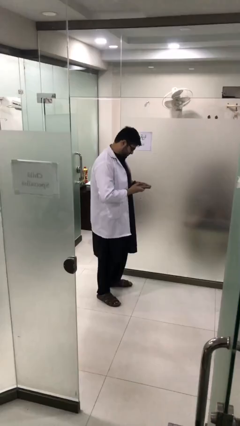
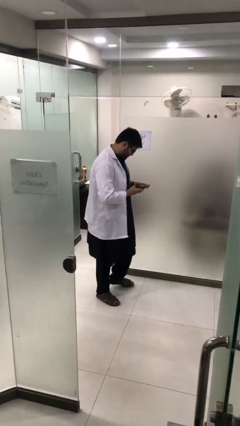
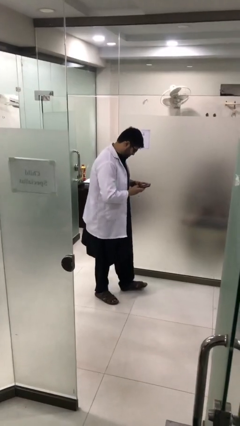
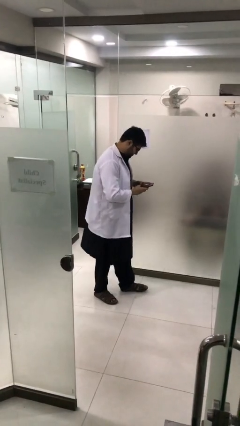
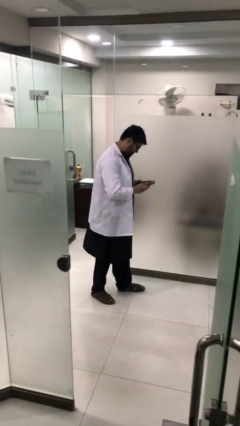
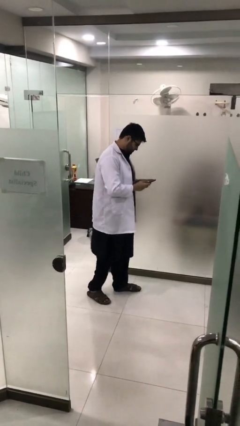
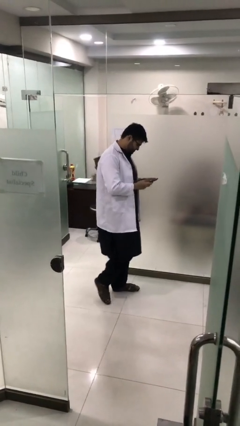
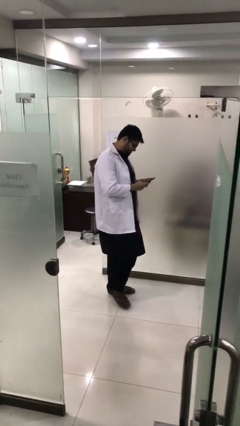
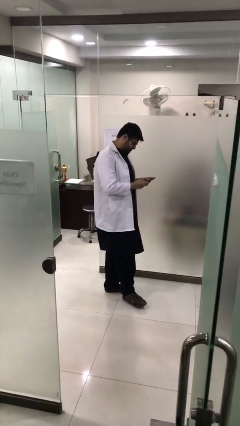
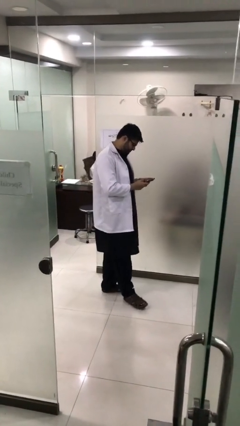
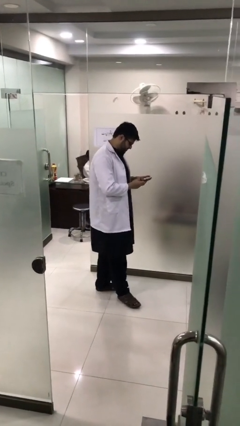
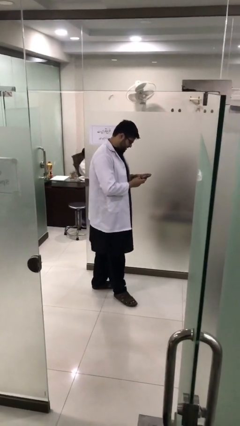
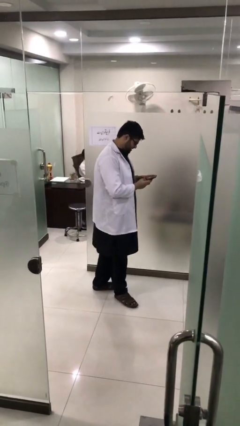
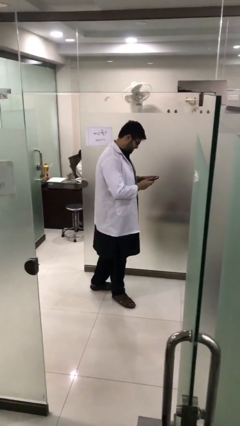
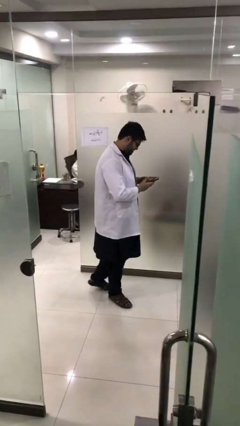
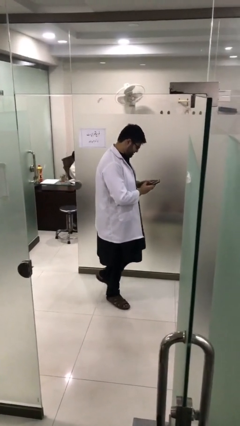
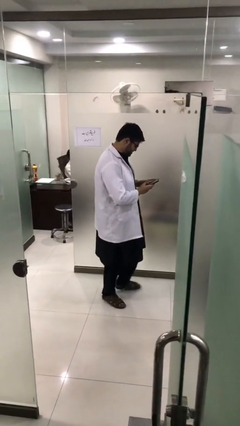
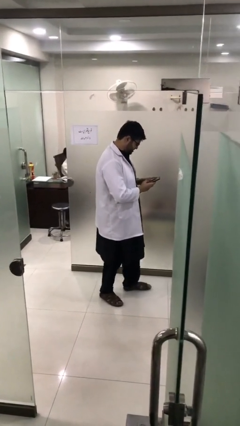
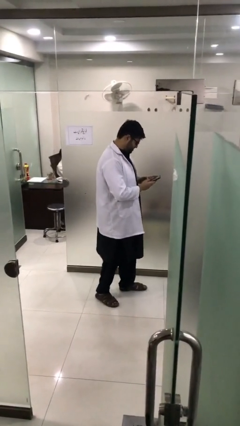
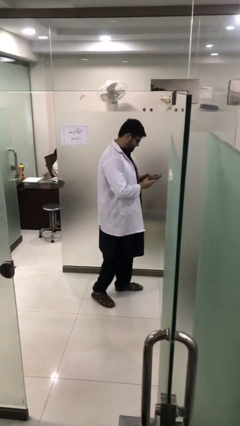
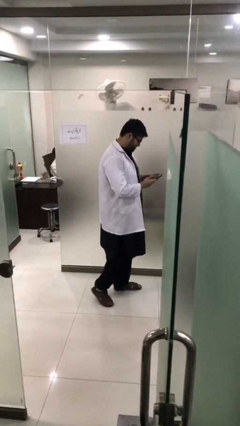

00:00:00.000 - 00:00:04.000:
person texts on phone

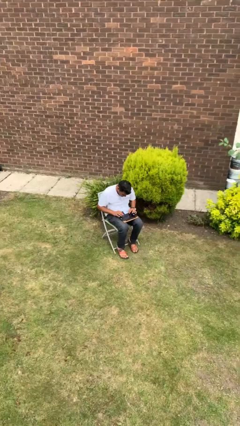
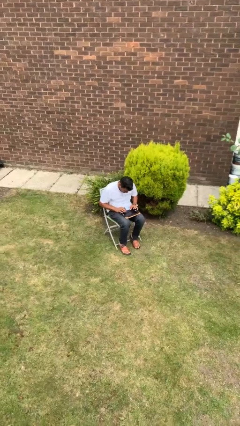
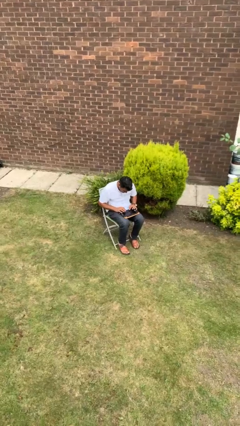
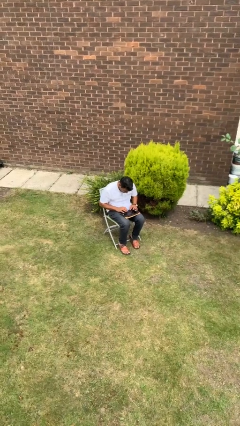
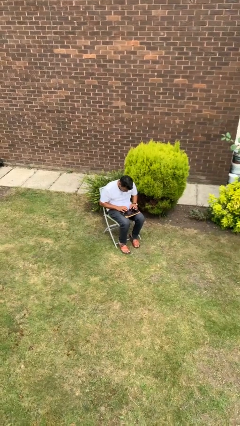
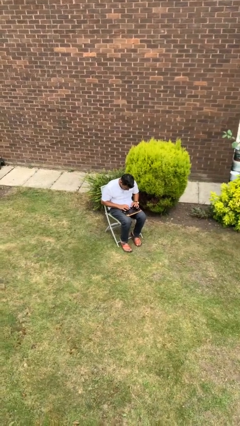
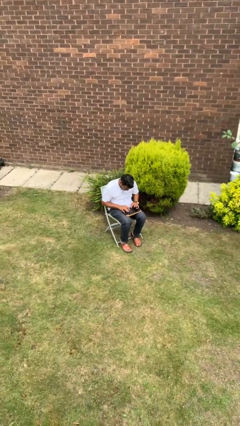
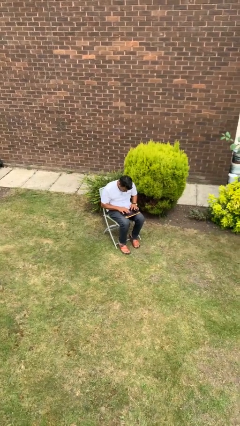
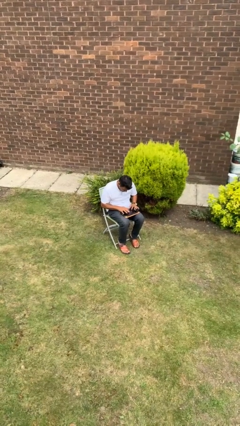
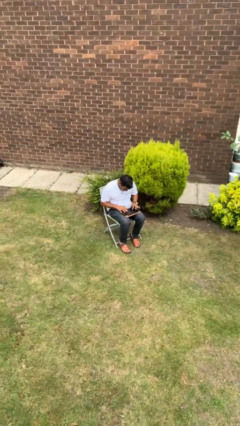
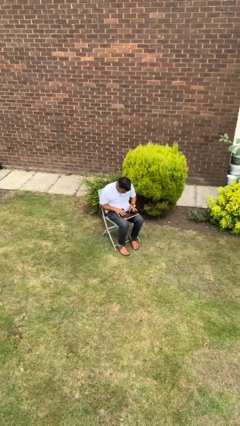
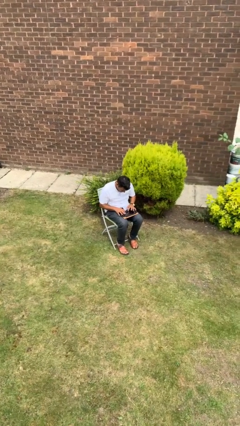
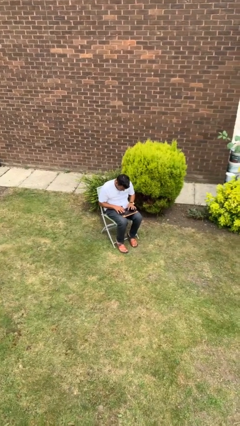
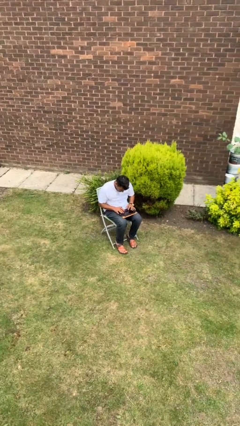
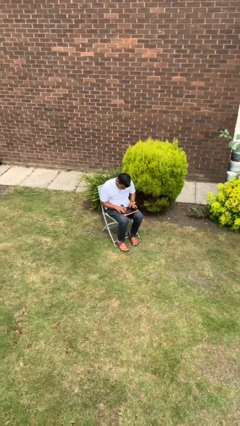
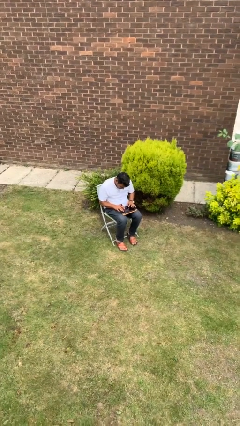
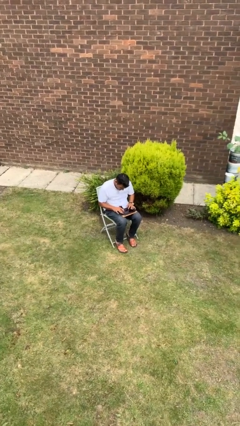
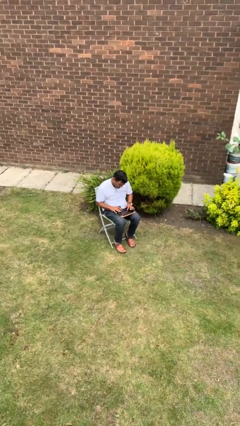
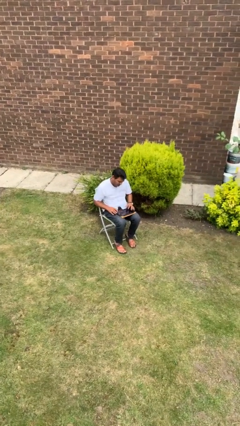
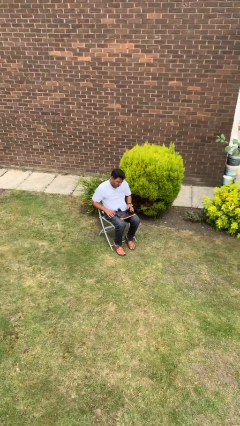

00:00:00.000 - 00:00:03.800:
person interacts with tablet

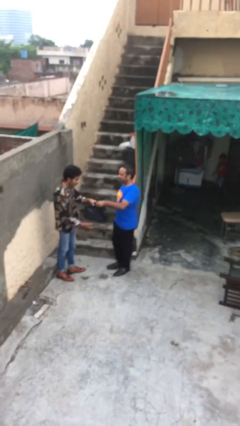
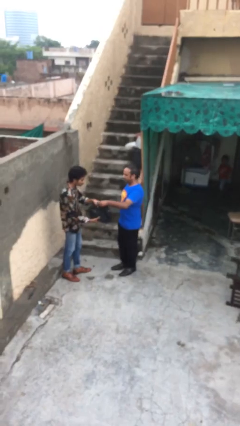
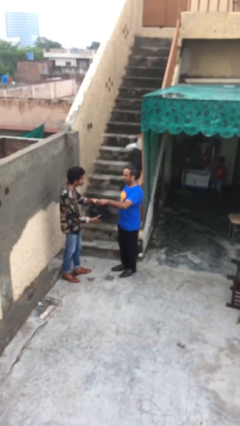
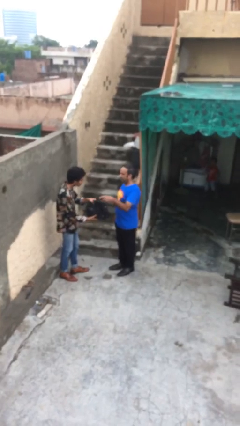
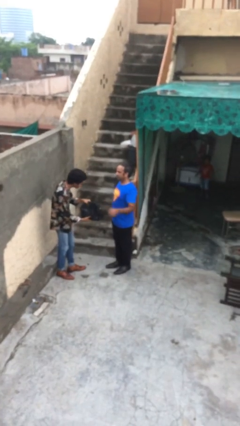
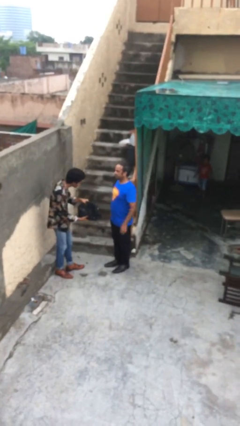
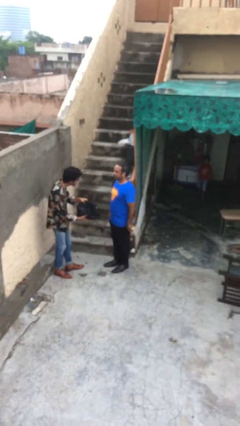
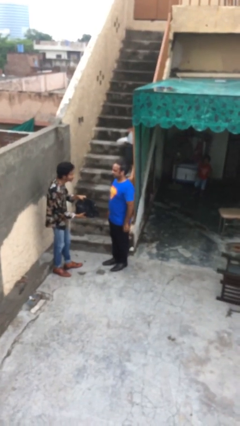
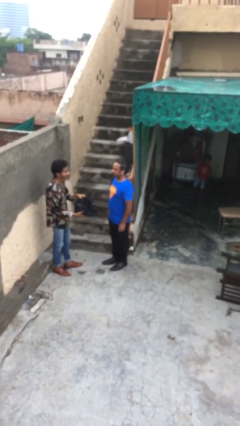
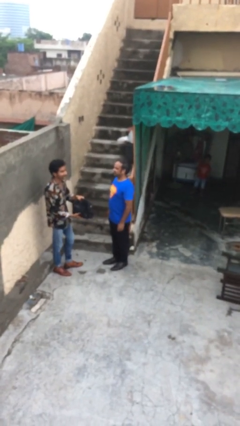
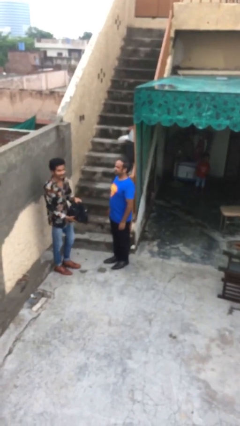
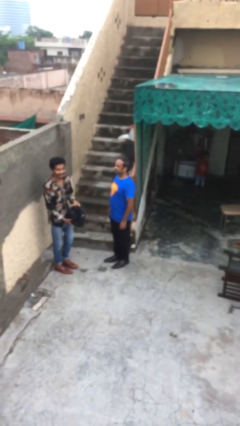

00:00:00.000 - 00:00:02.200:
person transfers object to person

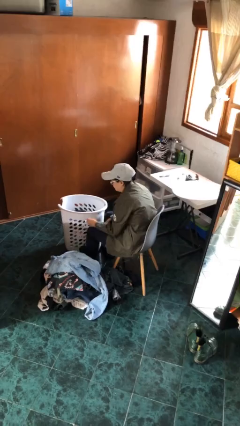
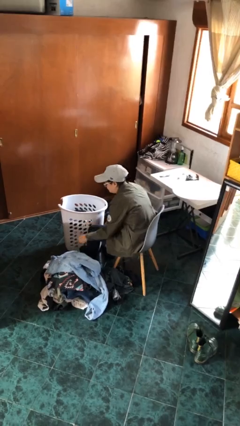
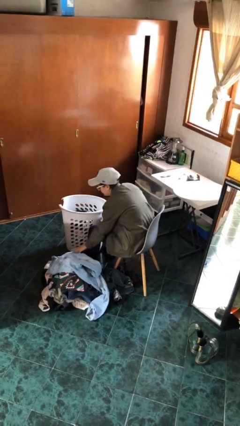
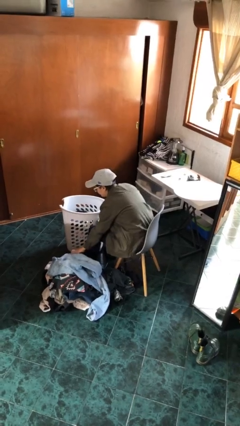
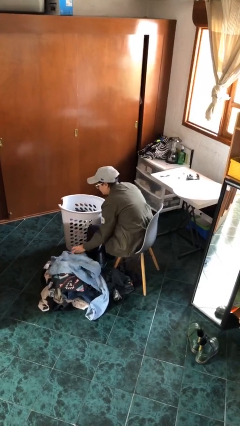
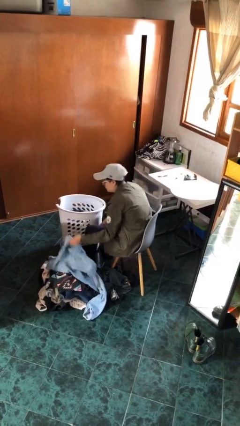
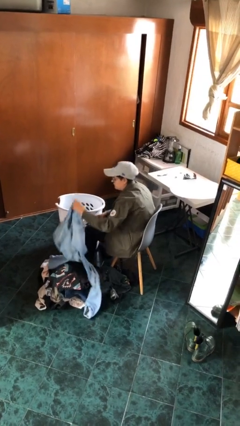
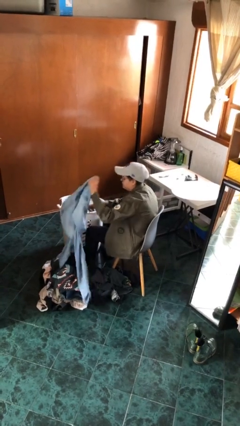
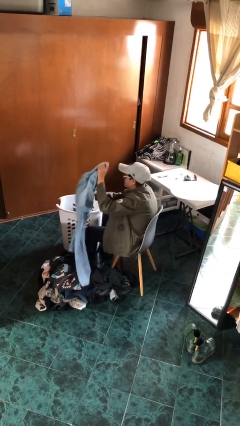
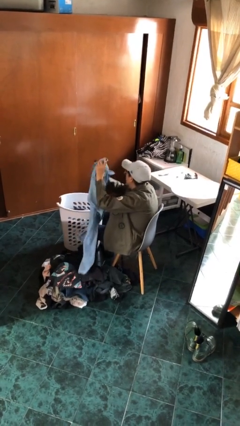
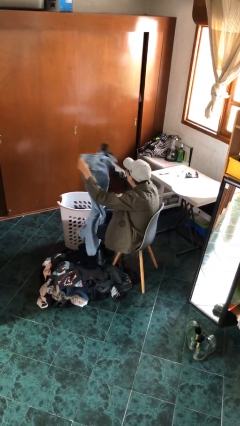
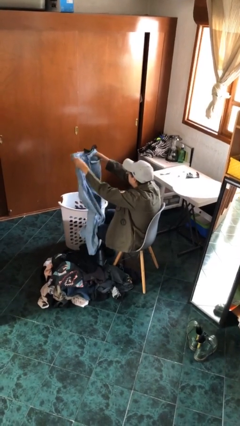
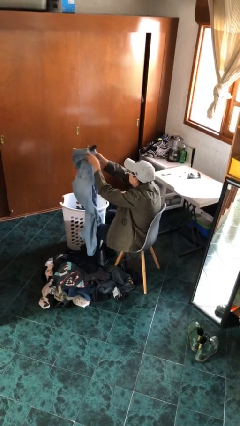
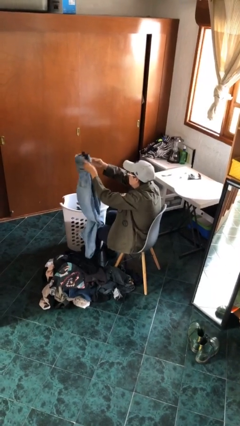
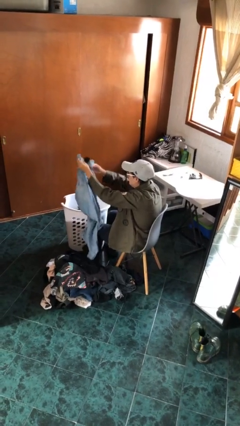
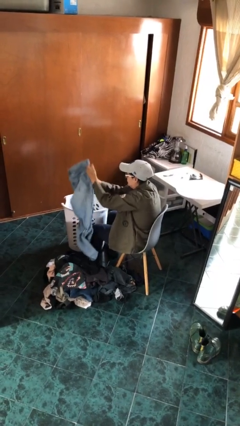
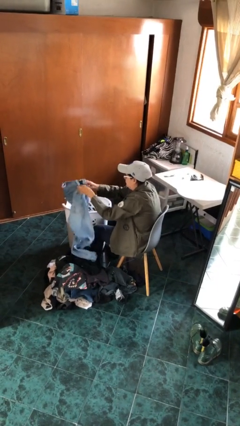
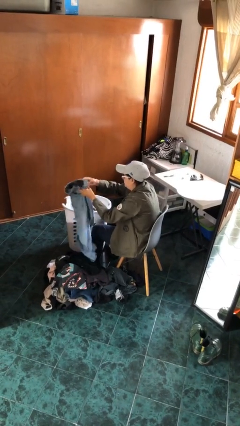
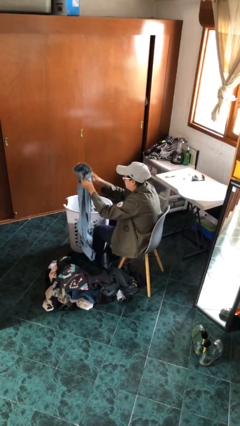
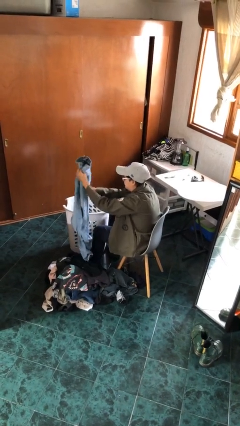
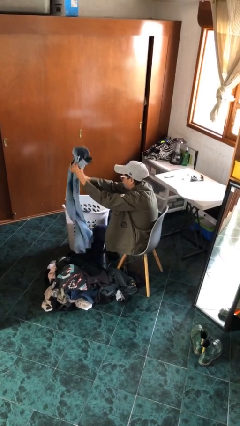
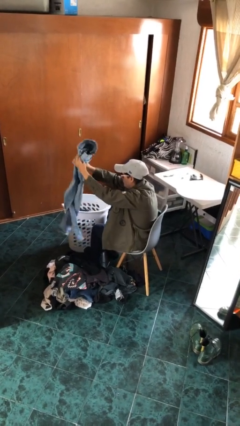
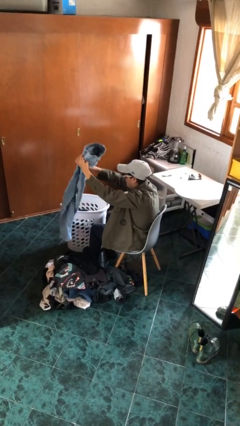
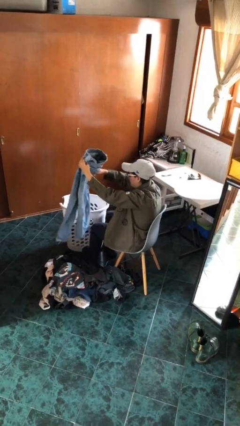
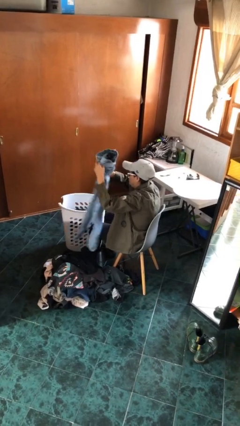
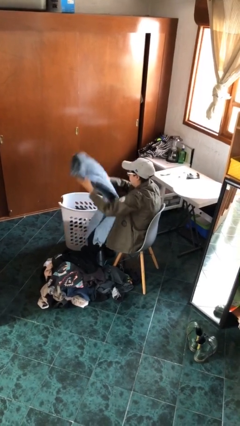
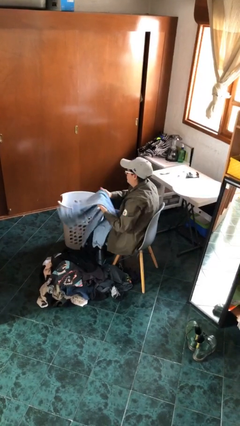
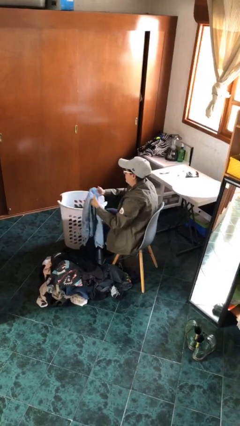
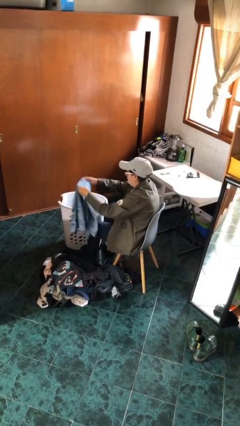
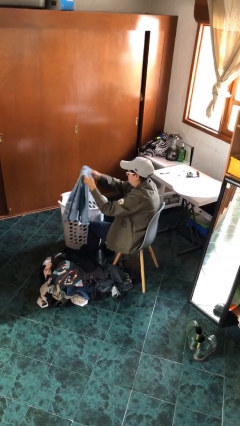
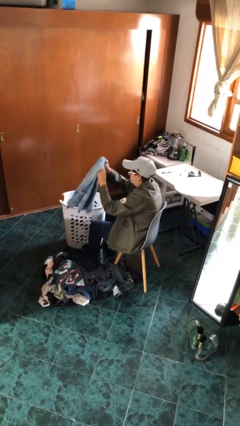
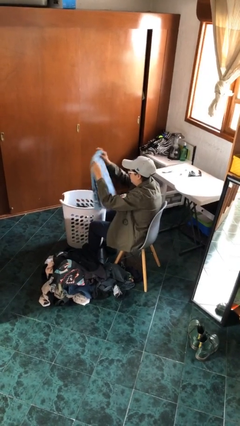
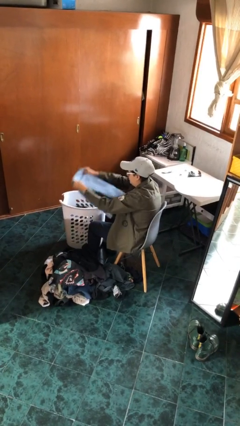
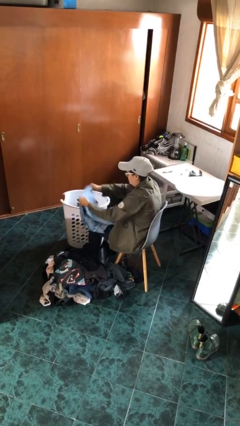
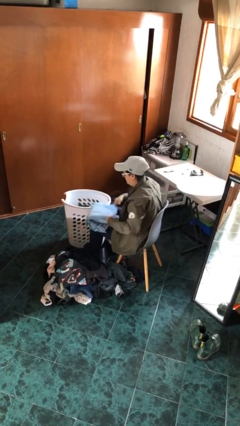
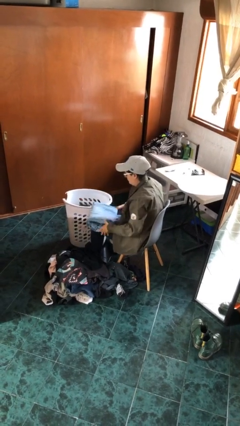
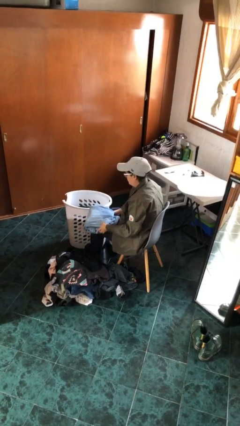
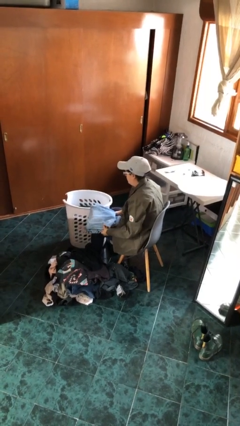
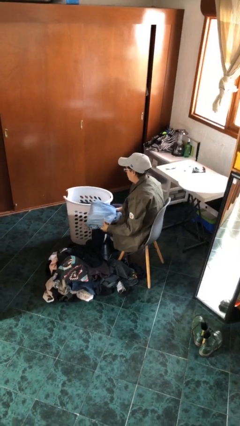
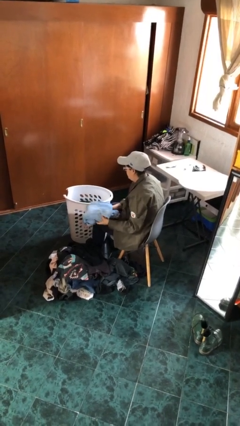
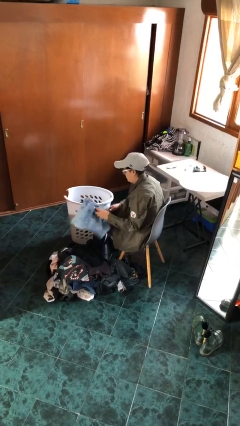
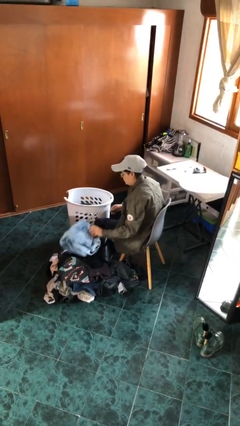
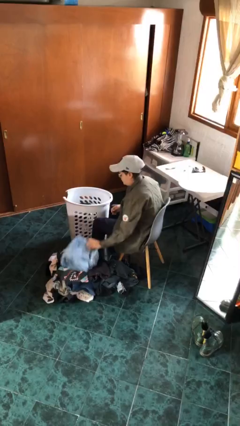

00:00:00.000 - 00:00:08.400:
person folds pants
